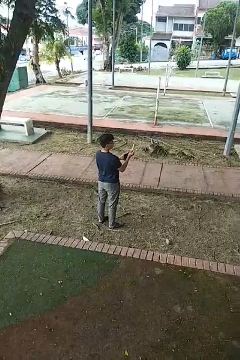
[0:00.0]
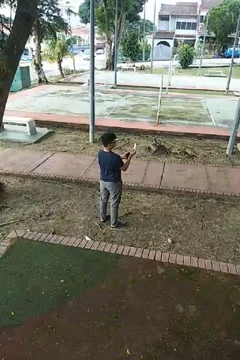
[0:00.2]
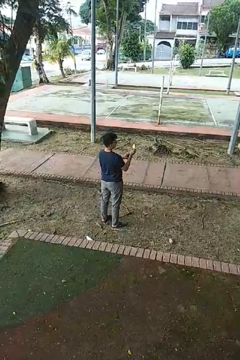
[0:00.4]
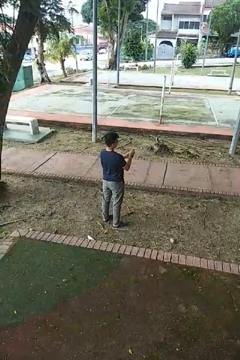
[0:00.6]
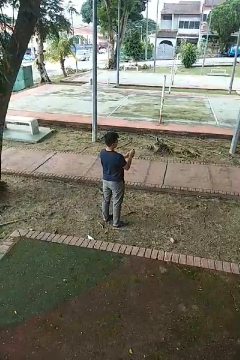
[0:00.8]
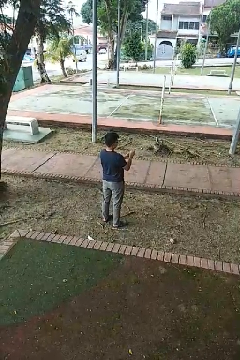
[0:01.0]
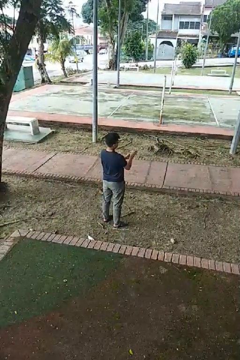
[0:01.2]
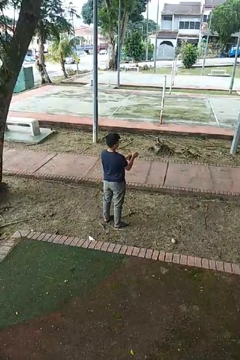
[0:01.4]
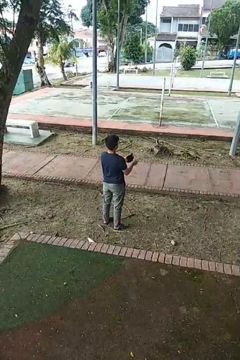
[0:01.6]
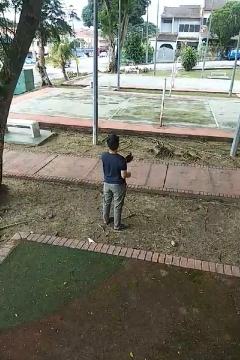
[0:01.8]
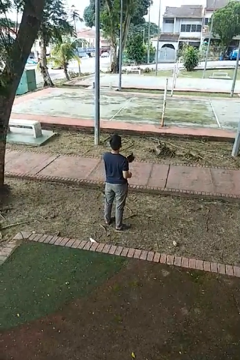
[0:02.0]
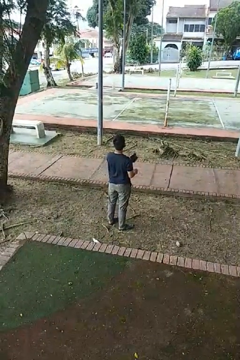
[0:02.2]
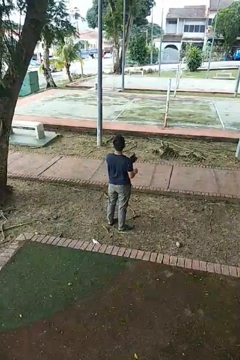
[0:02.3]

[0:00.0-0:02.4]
person puts object into purse

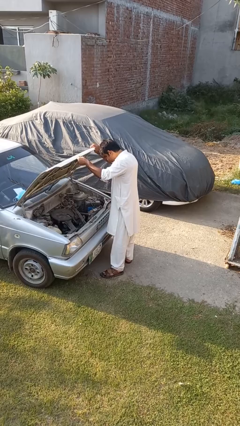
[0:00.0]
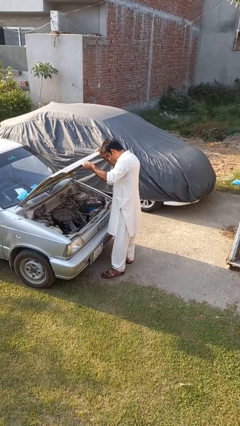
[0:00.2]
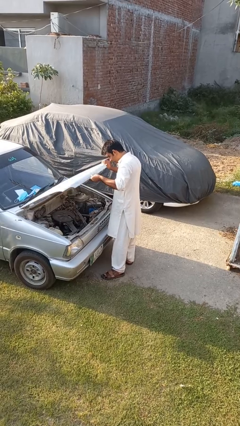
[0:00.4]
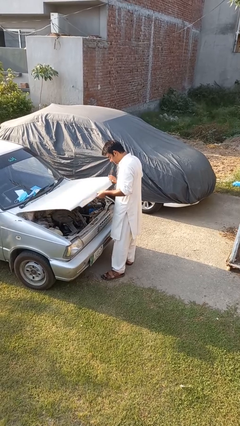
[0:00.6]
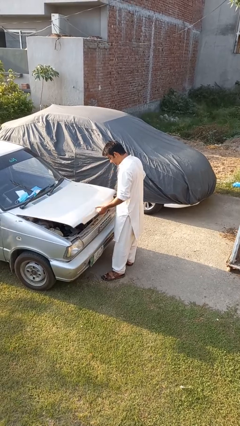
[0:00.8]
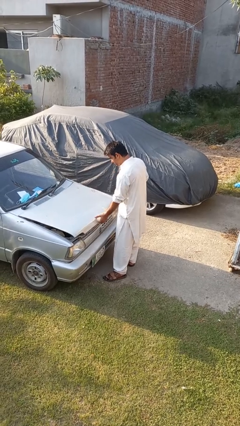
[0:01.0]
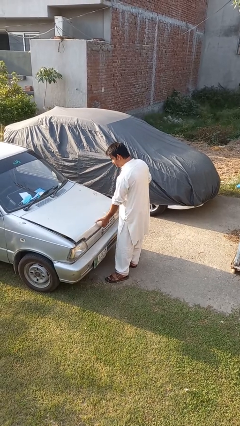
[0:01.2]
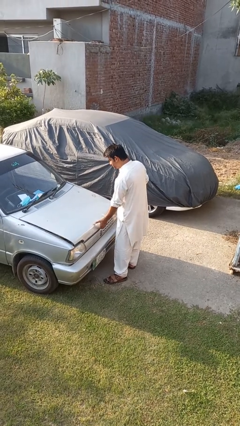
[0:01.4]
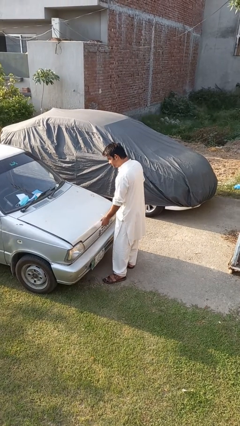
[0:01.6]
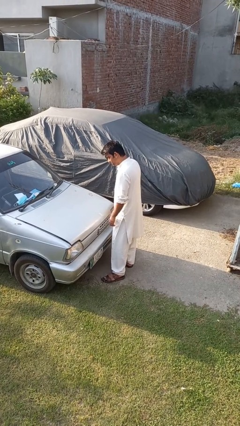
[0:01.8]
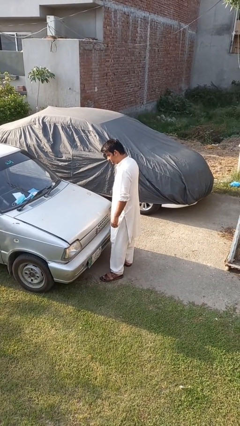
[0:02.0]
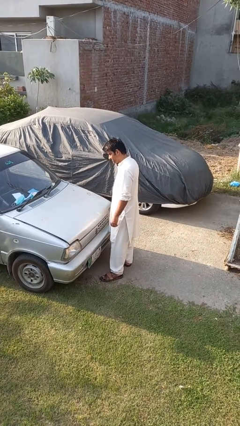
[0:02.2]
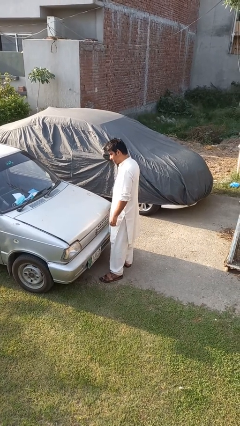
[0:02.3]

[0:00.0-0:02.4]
person closes car hood

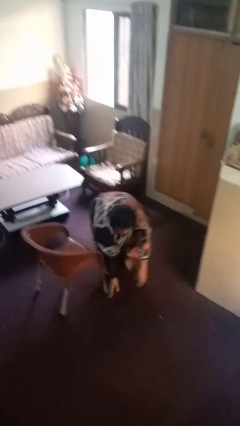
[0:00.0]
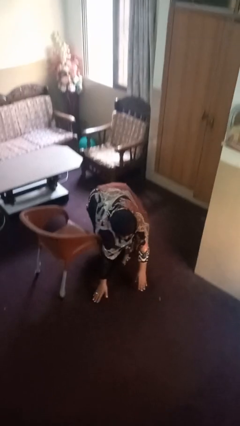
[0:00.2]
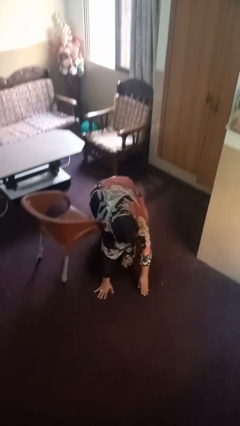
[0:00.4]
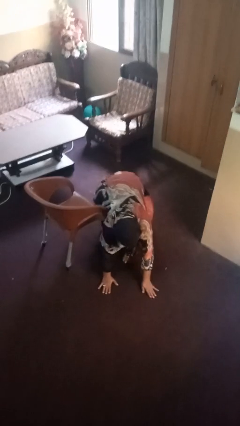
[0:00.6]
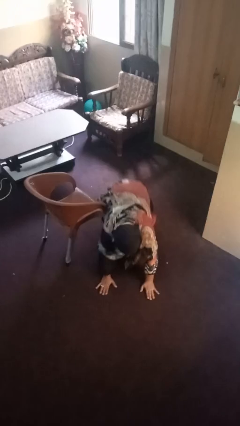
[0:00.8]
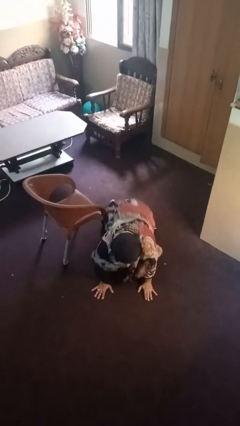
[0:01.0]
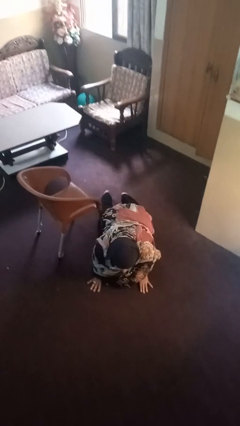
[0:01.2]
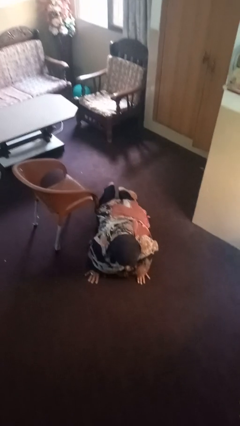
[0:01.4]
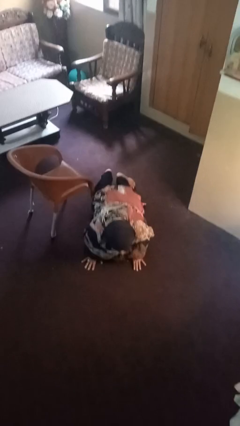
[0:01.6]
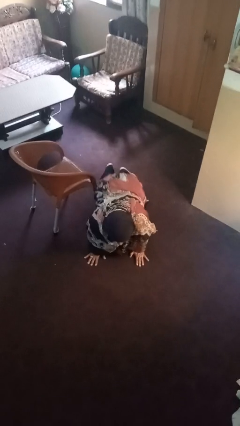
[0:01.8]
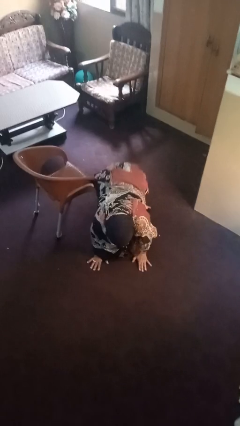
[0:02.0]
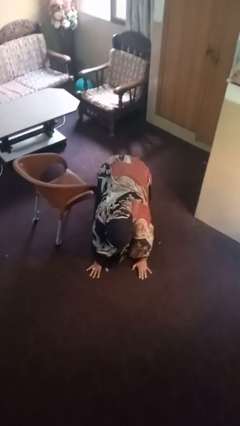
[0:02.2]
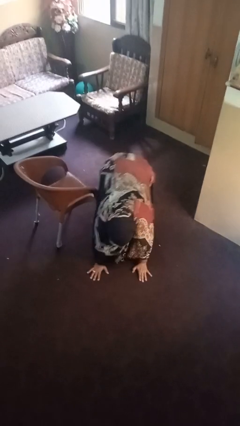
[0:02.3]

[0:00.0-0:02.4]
person lies down on floor

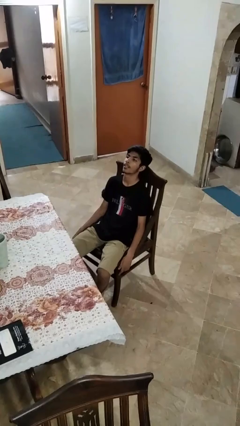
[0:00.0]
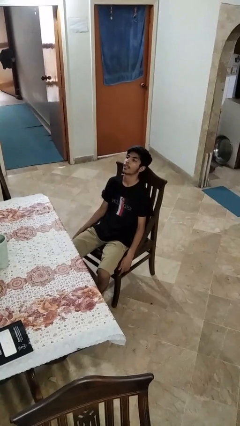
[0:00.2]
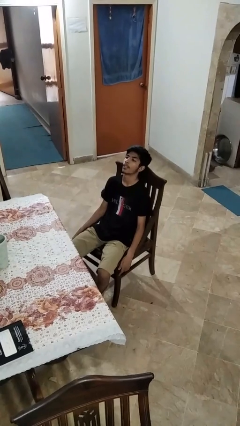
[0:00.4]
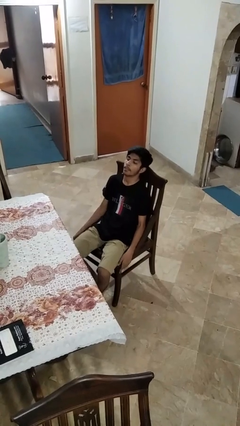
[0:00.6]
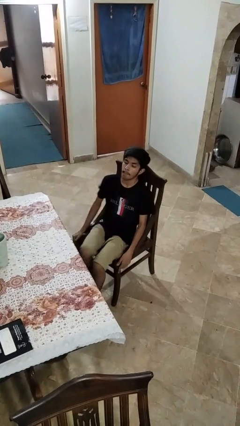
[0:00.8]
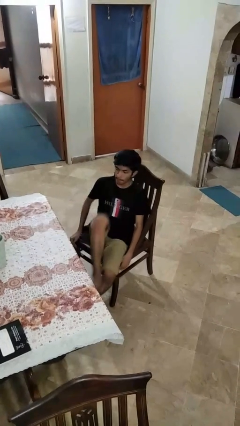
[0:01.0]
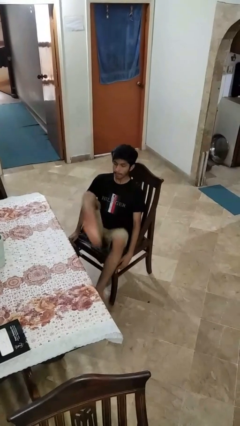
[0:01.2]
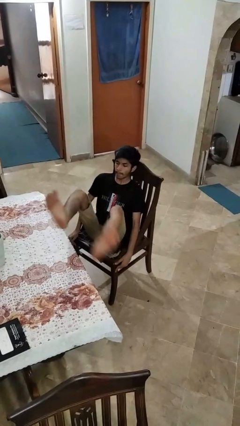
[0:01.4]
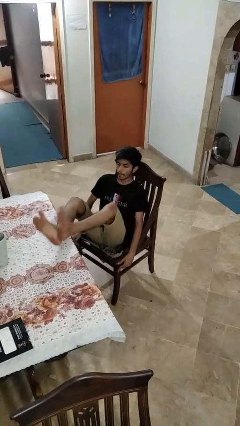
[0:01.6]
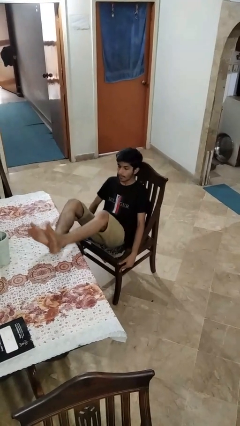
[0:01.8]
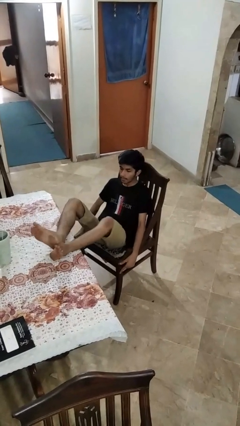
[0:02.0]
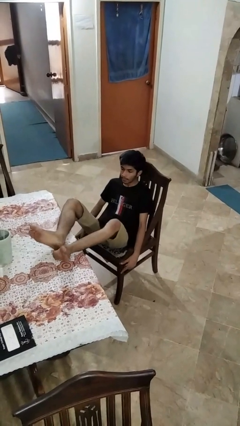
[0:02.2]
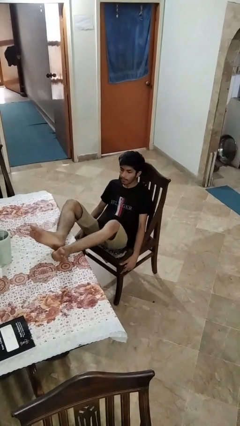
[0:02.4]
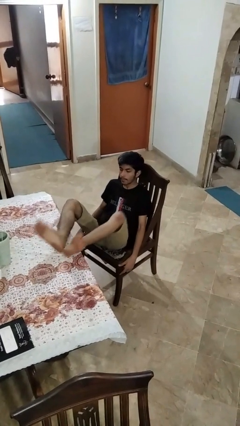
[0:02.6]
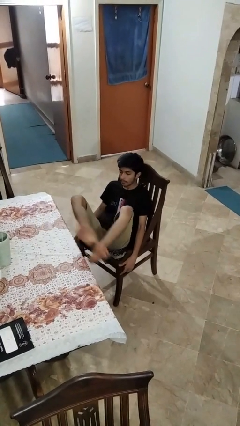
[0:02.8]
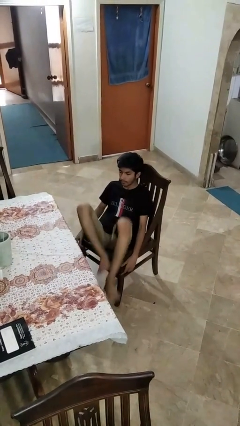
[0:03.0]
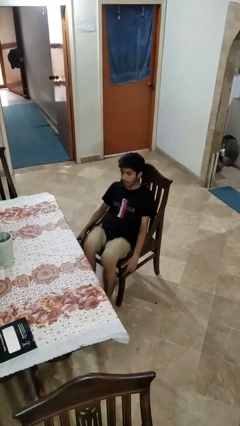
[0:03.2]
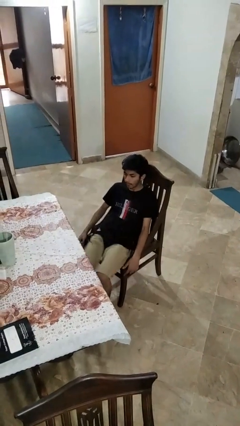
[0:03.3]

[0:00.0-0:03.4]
person puts feet up

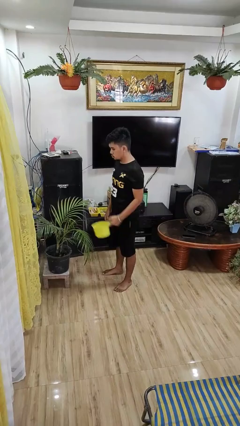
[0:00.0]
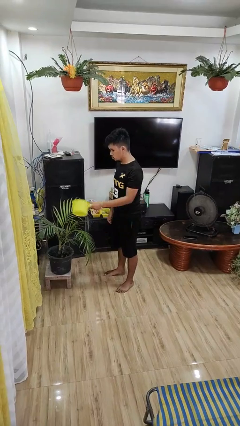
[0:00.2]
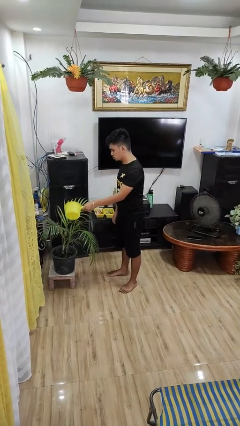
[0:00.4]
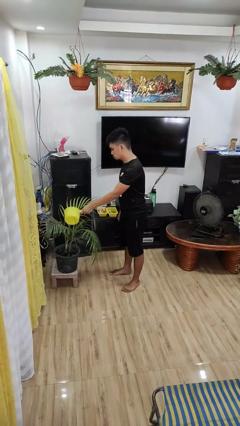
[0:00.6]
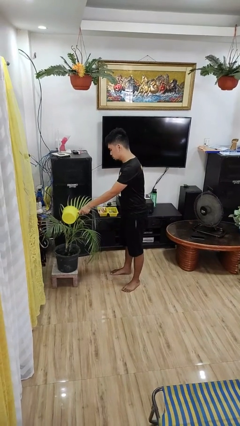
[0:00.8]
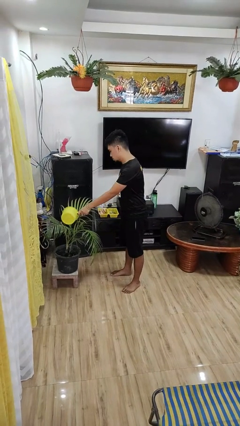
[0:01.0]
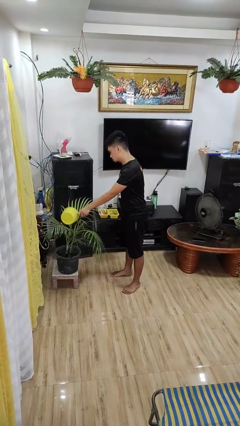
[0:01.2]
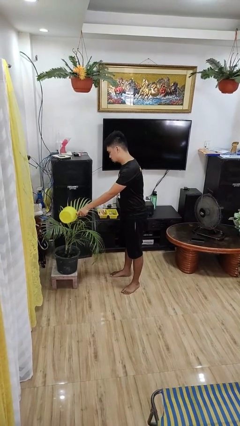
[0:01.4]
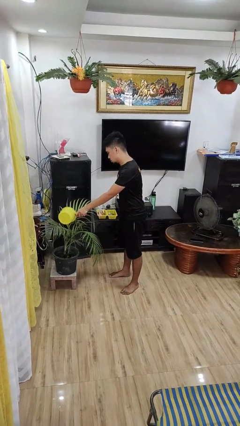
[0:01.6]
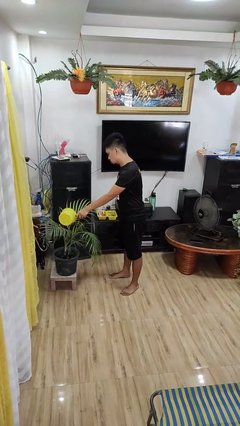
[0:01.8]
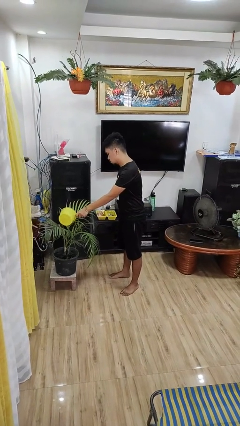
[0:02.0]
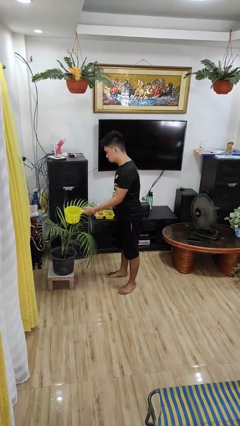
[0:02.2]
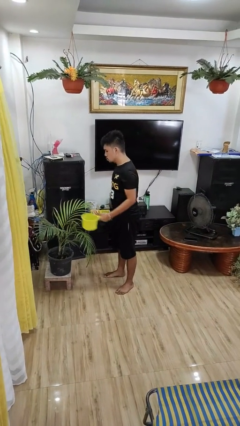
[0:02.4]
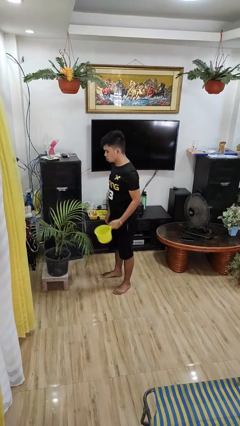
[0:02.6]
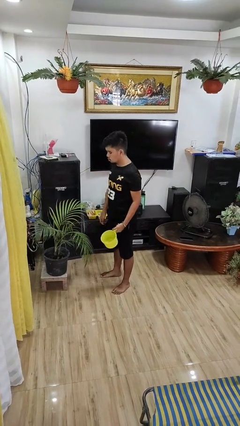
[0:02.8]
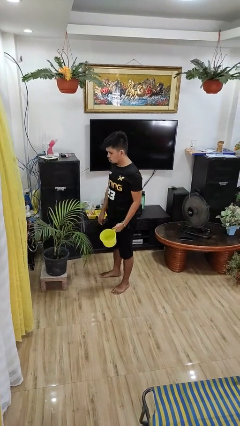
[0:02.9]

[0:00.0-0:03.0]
person waters houseplant

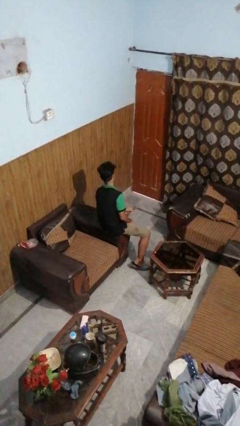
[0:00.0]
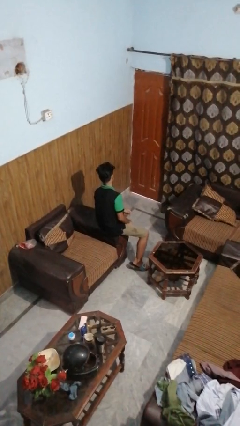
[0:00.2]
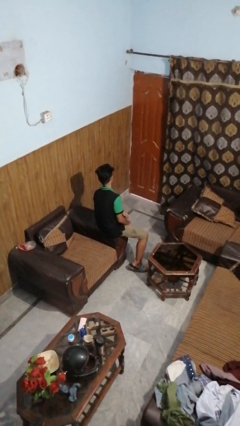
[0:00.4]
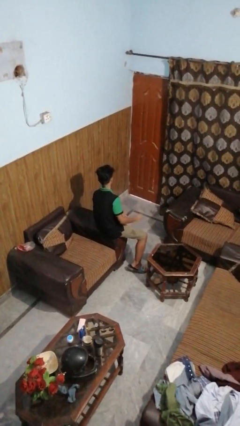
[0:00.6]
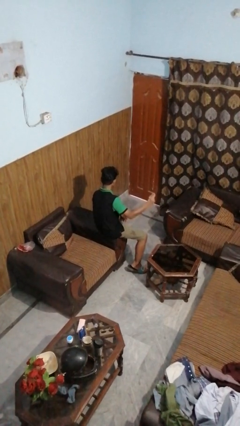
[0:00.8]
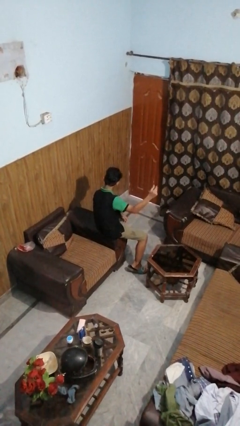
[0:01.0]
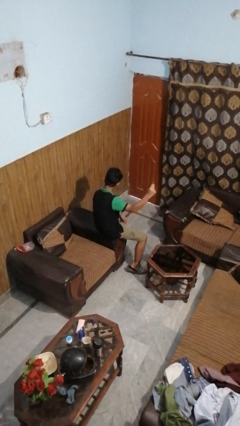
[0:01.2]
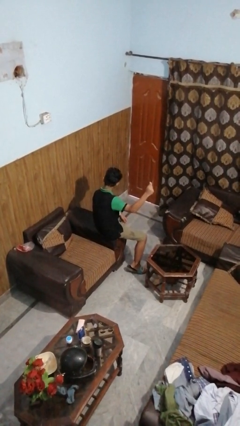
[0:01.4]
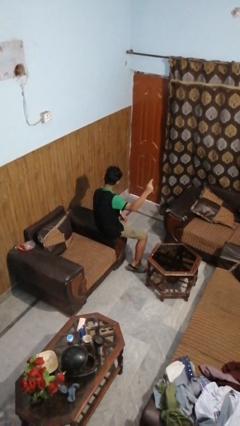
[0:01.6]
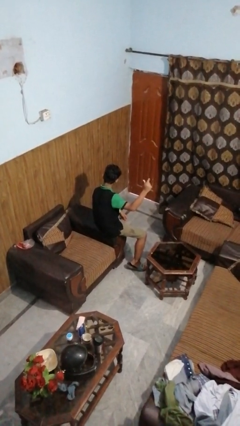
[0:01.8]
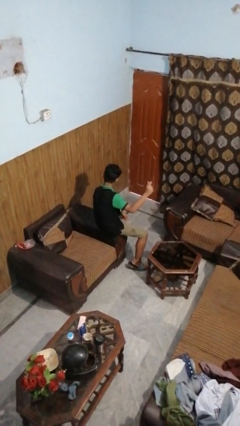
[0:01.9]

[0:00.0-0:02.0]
person snaps fingers

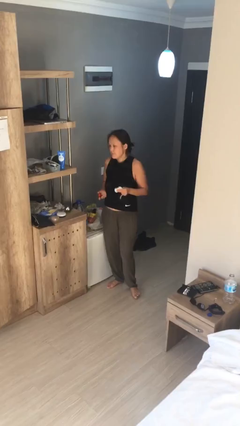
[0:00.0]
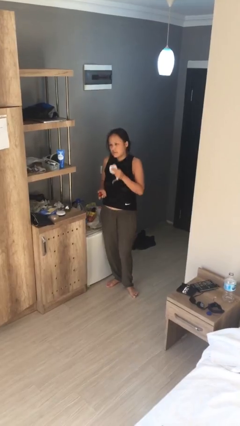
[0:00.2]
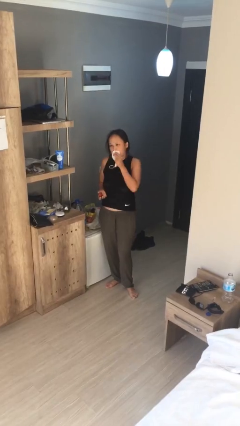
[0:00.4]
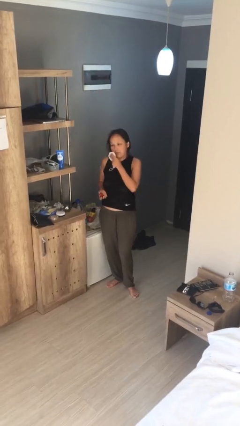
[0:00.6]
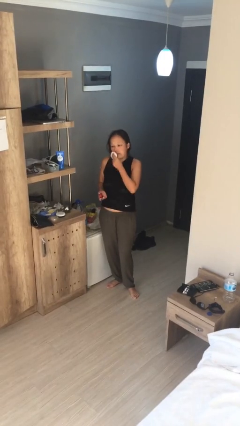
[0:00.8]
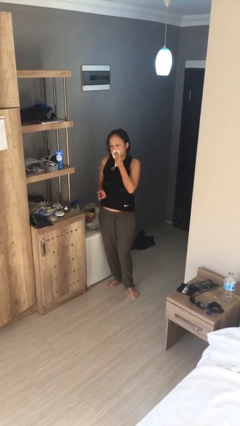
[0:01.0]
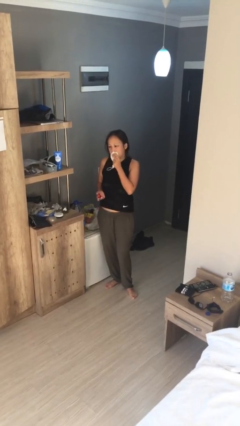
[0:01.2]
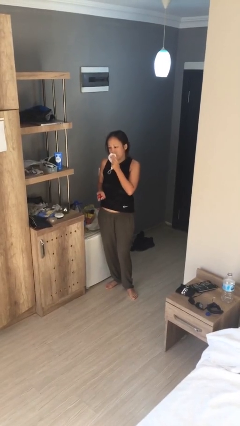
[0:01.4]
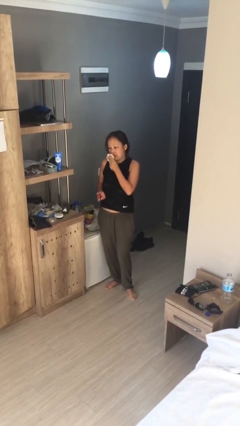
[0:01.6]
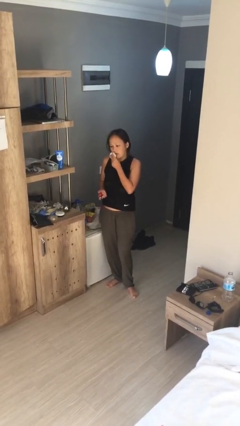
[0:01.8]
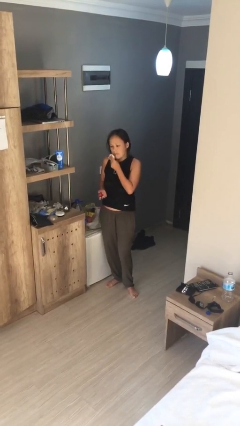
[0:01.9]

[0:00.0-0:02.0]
person wipes mouth with napkin
